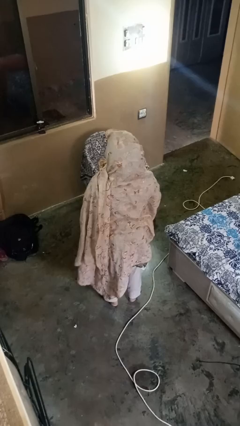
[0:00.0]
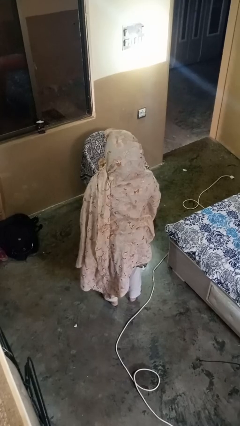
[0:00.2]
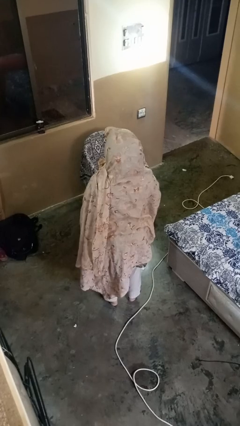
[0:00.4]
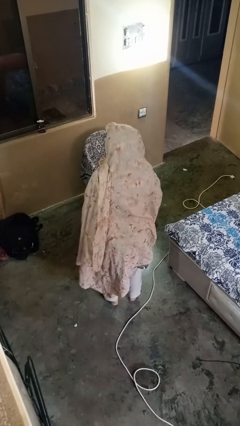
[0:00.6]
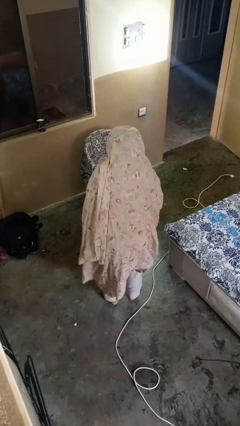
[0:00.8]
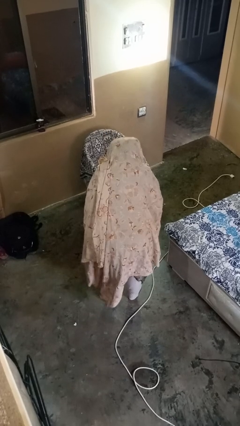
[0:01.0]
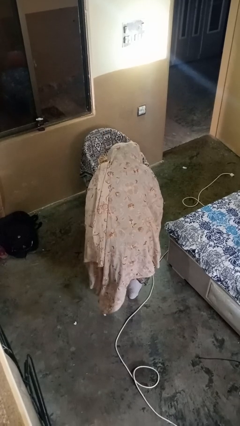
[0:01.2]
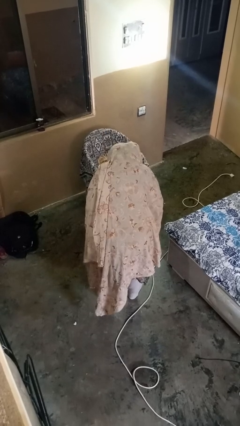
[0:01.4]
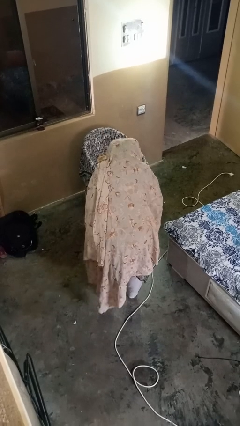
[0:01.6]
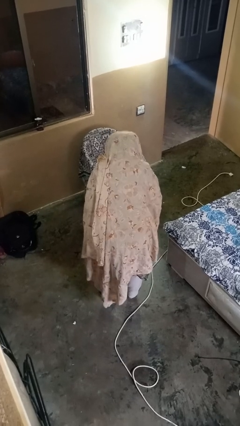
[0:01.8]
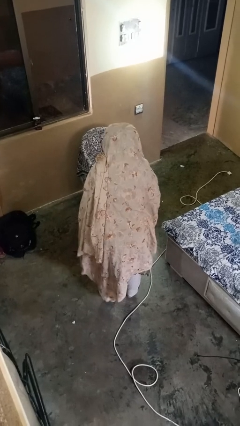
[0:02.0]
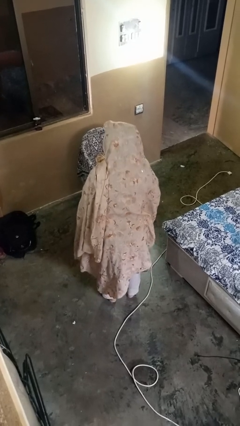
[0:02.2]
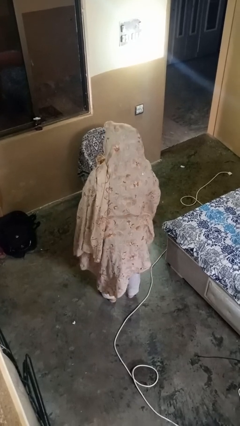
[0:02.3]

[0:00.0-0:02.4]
person bows

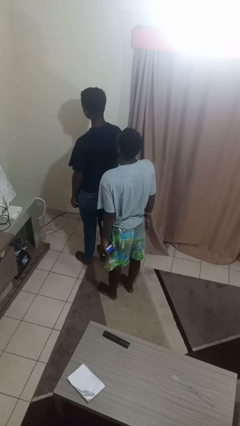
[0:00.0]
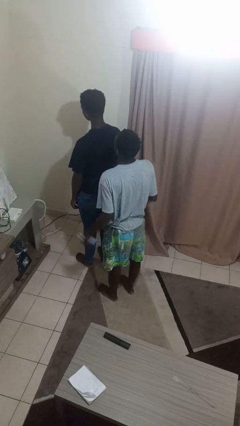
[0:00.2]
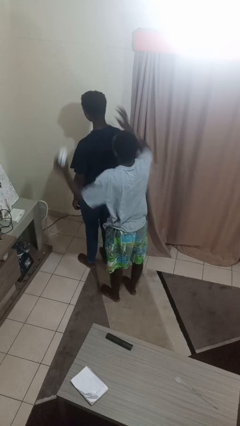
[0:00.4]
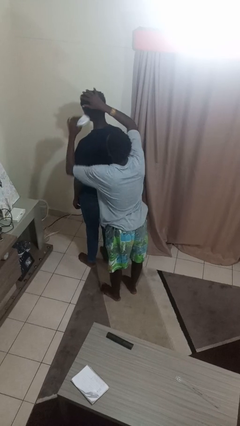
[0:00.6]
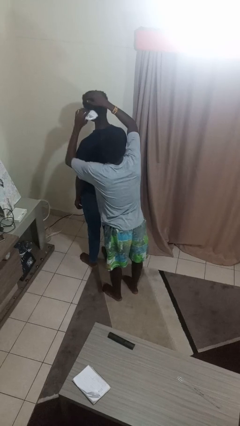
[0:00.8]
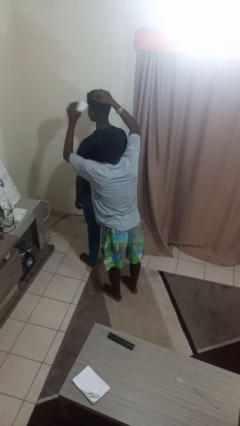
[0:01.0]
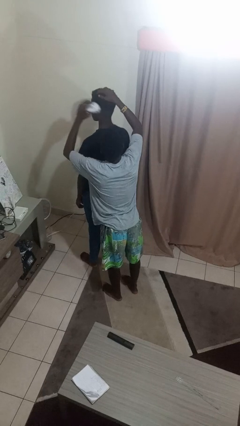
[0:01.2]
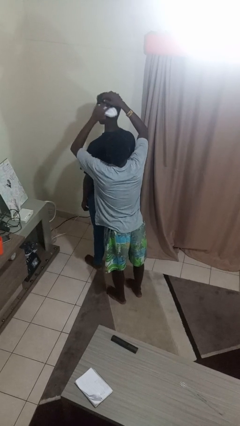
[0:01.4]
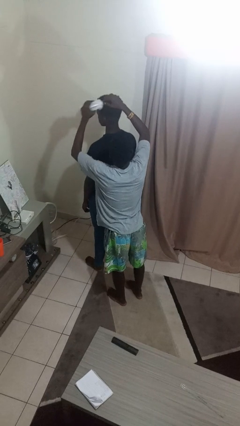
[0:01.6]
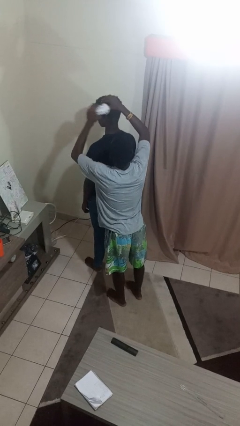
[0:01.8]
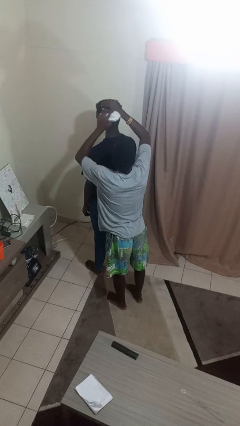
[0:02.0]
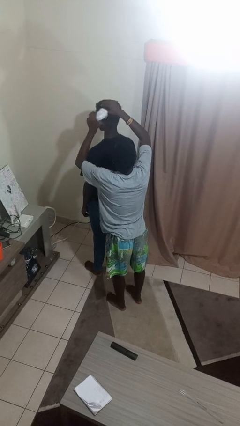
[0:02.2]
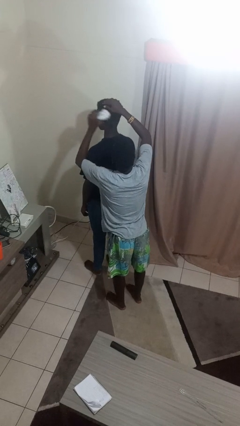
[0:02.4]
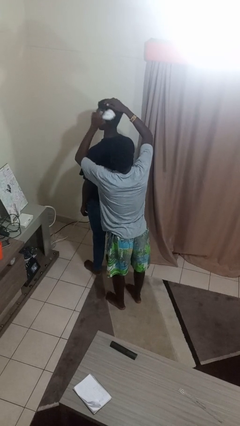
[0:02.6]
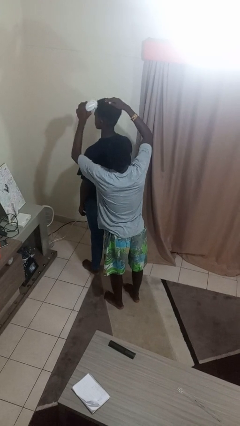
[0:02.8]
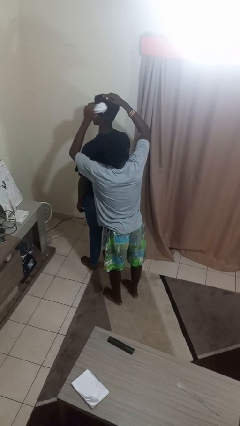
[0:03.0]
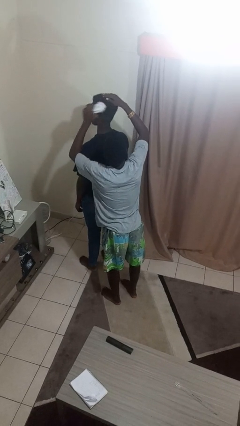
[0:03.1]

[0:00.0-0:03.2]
person brushes hair of person

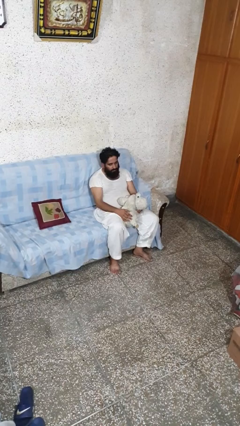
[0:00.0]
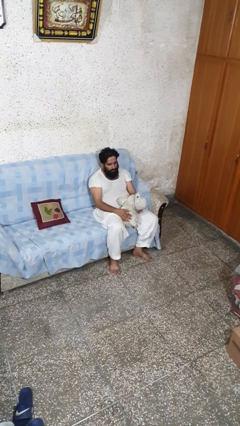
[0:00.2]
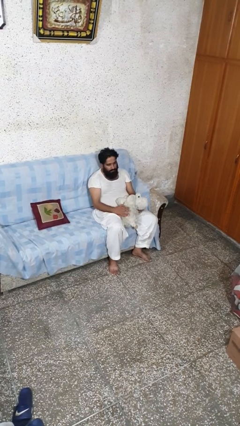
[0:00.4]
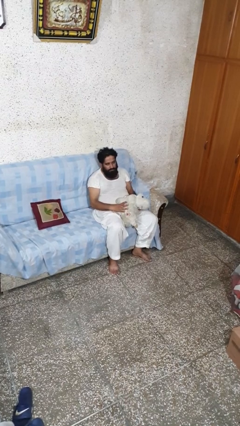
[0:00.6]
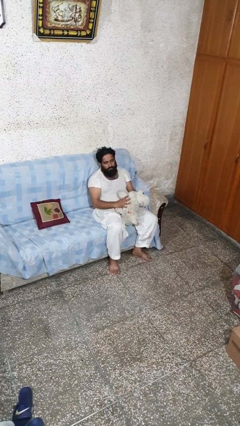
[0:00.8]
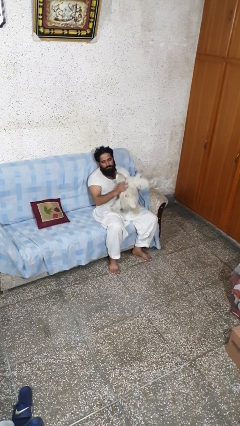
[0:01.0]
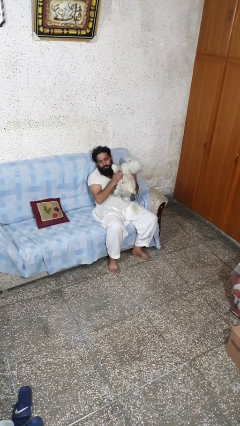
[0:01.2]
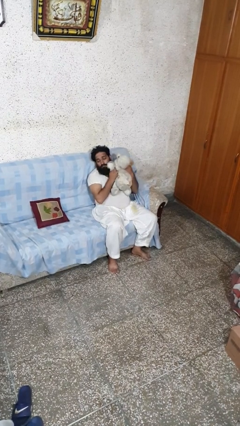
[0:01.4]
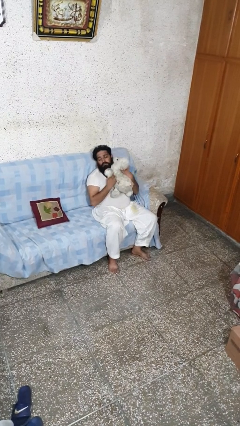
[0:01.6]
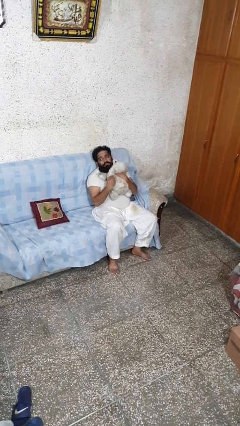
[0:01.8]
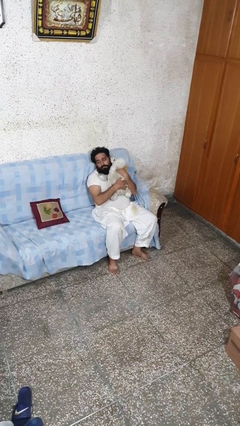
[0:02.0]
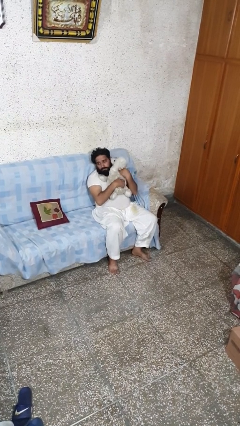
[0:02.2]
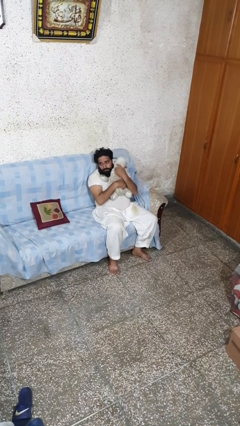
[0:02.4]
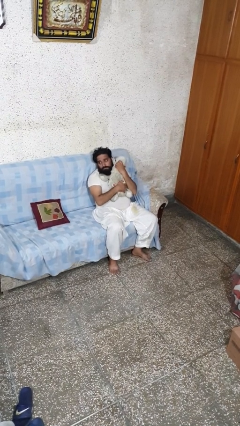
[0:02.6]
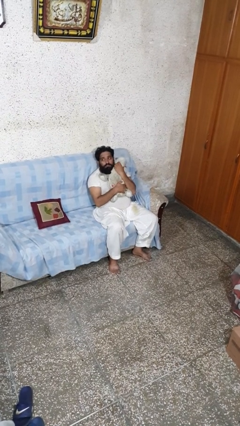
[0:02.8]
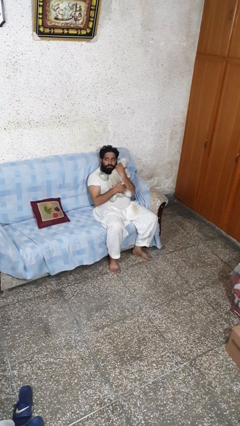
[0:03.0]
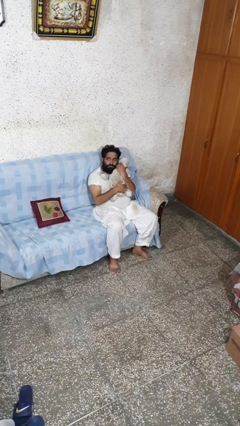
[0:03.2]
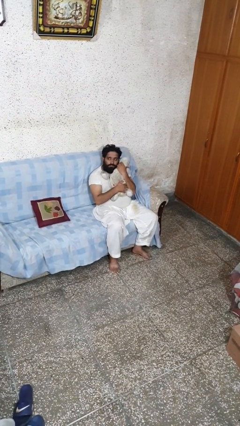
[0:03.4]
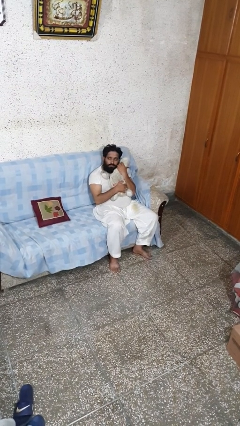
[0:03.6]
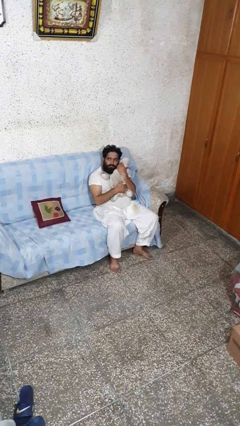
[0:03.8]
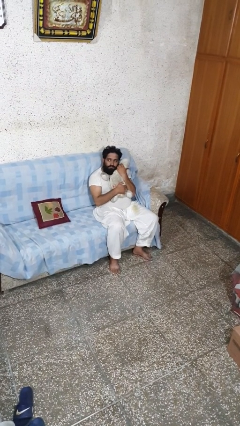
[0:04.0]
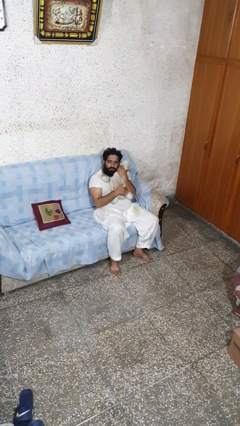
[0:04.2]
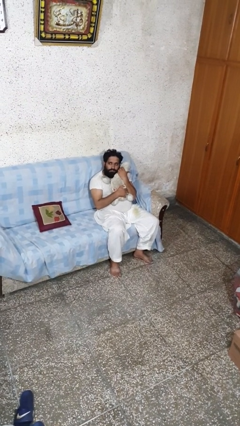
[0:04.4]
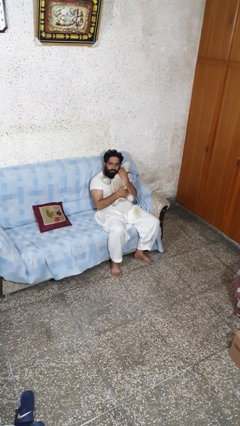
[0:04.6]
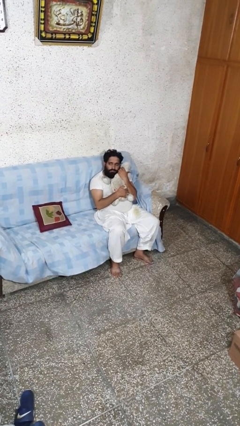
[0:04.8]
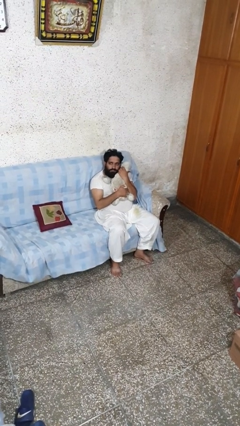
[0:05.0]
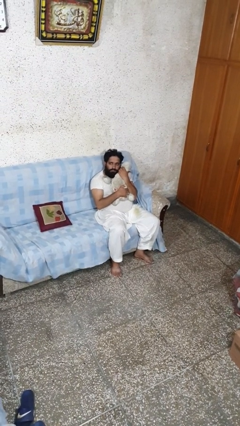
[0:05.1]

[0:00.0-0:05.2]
person hugs stuffed animal

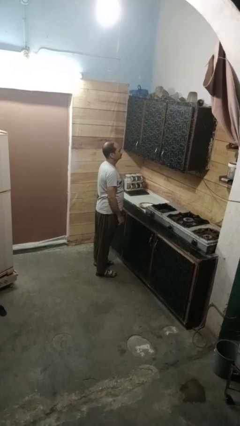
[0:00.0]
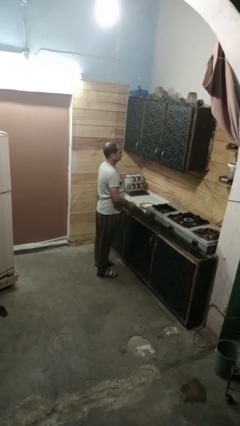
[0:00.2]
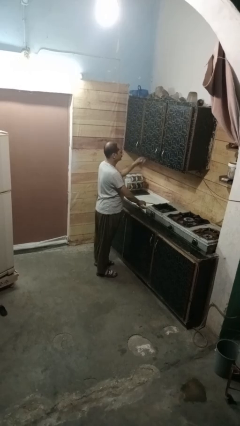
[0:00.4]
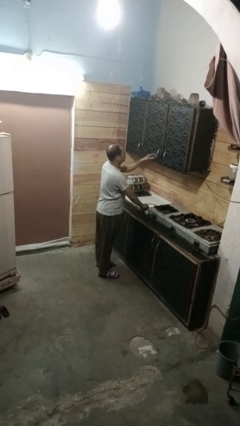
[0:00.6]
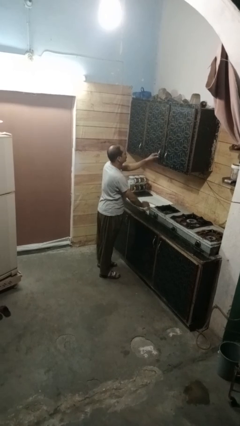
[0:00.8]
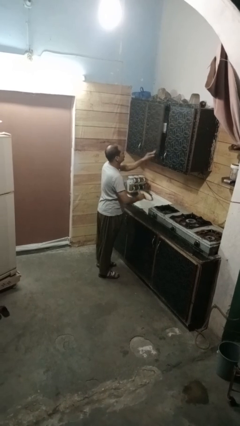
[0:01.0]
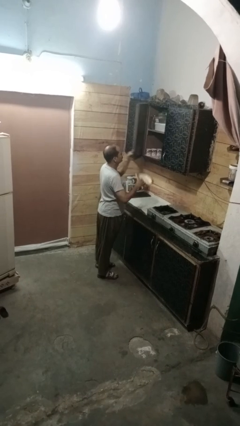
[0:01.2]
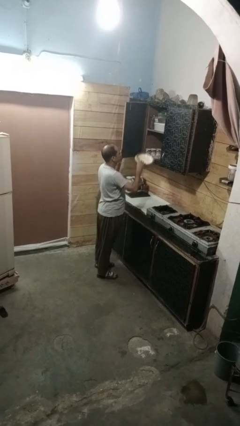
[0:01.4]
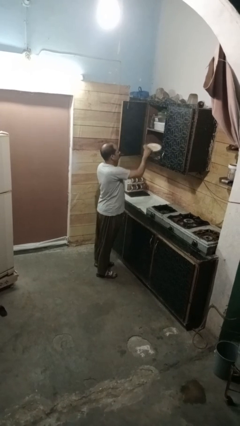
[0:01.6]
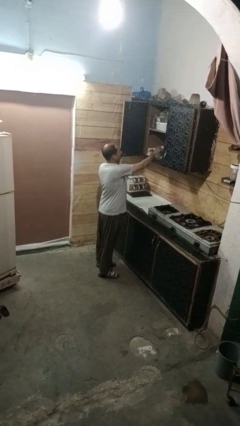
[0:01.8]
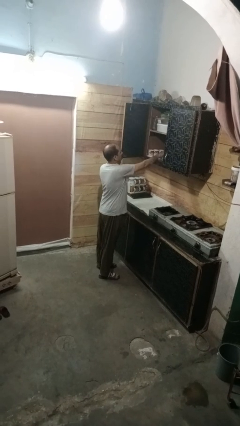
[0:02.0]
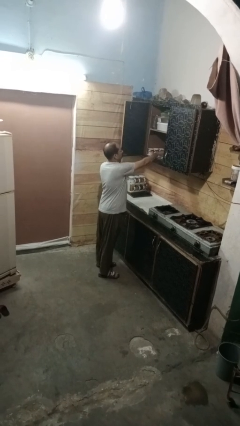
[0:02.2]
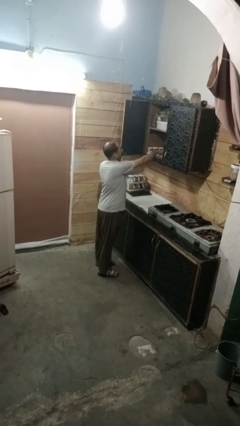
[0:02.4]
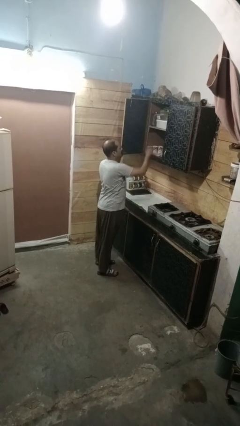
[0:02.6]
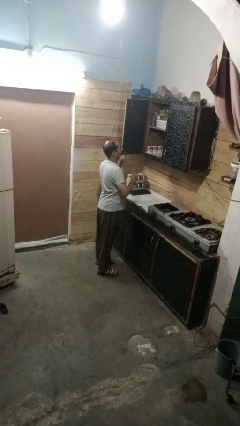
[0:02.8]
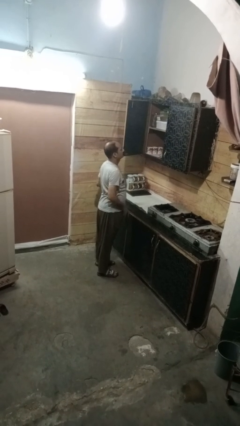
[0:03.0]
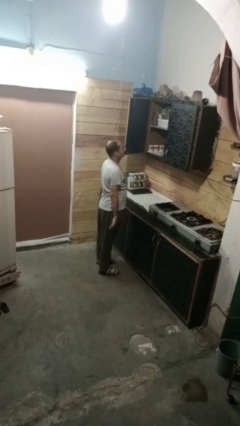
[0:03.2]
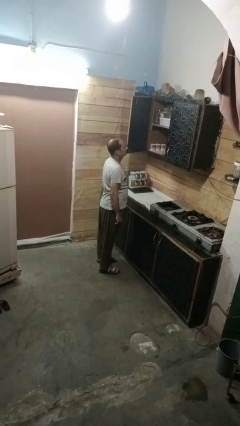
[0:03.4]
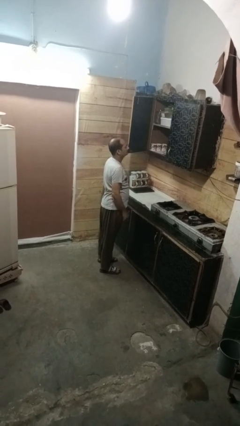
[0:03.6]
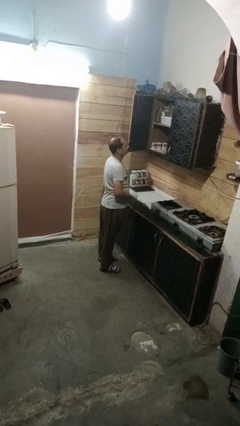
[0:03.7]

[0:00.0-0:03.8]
person puts object in cabinet

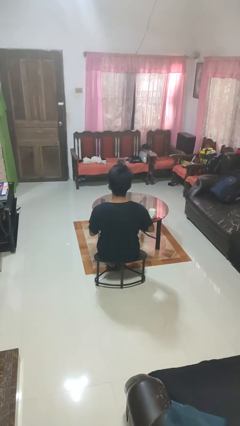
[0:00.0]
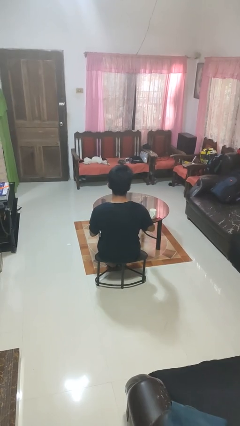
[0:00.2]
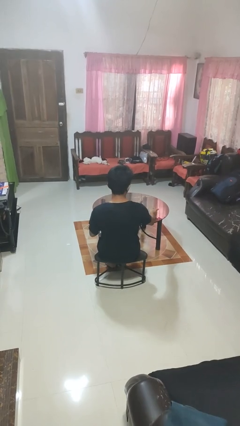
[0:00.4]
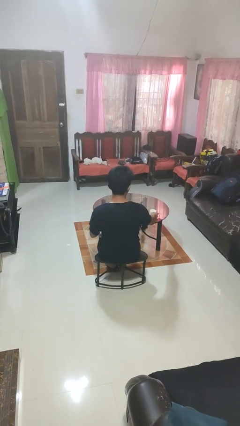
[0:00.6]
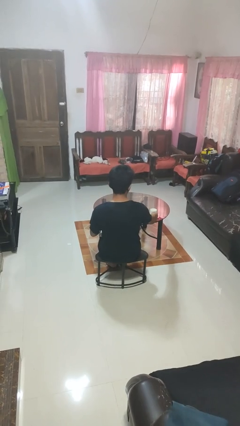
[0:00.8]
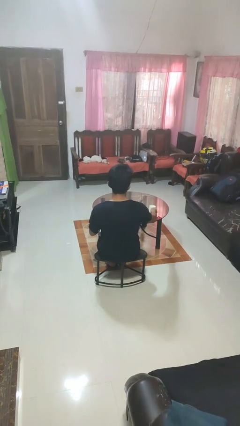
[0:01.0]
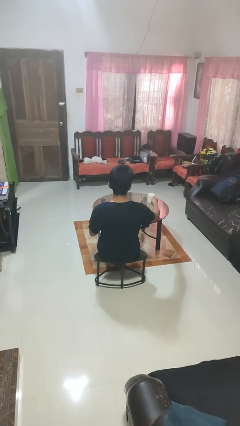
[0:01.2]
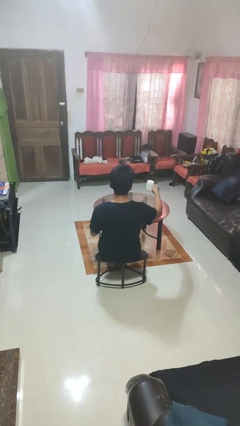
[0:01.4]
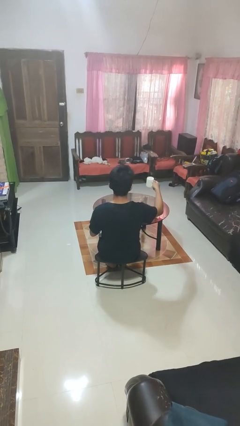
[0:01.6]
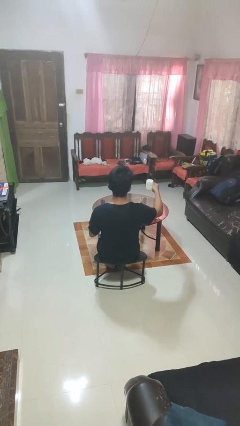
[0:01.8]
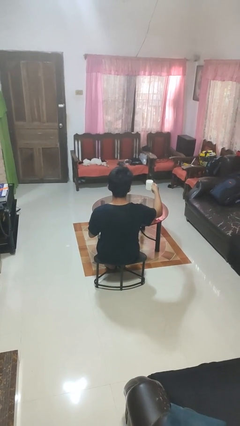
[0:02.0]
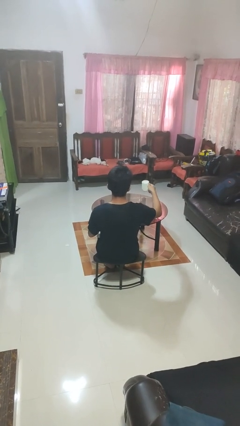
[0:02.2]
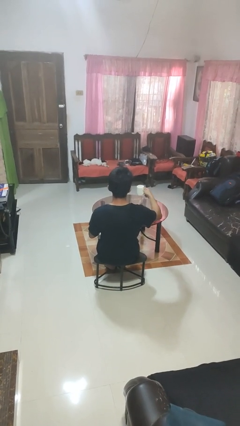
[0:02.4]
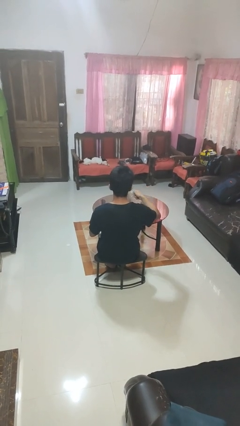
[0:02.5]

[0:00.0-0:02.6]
person picks up object from table

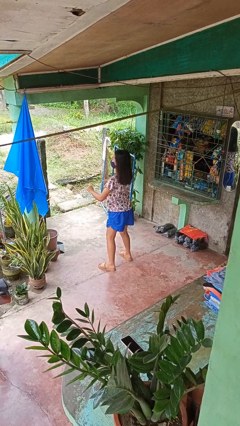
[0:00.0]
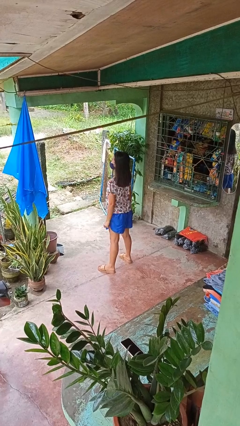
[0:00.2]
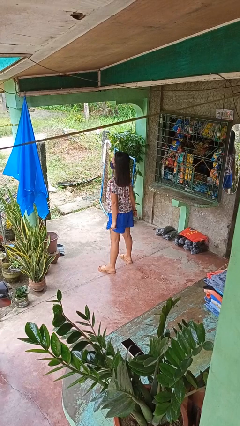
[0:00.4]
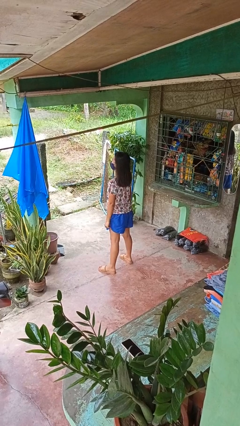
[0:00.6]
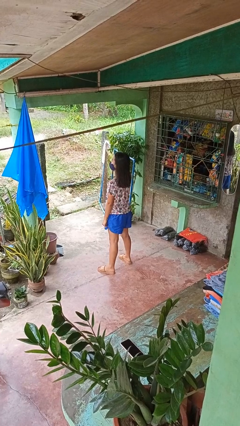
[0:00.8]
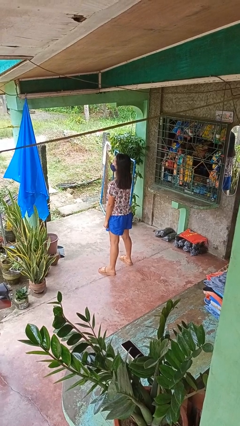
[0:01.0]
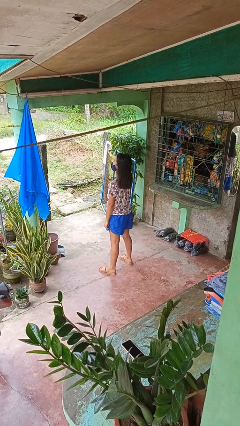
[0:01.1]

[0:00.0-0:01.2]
person stands up
